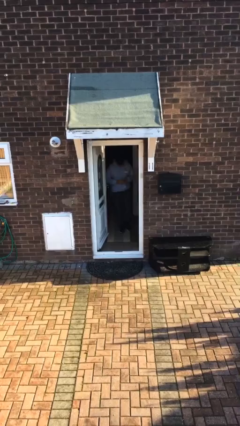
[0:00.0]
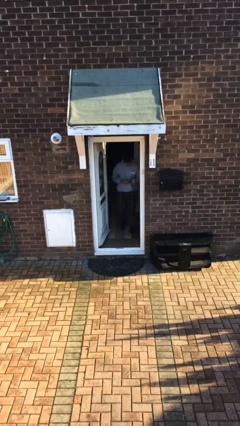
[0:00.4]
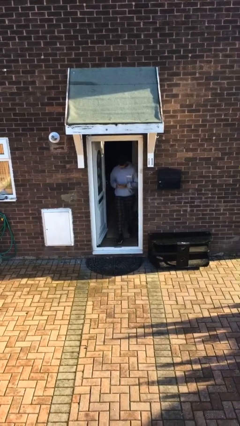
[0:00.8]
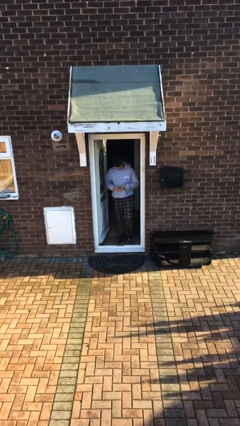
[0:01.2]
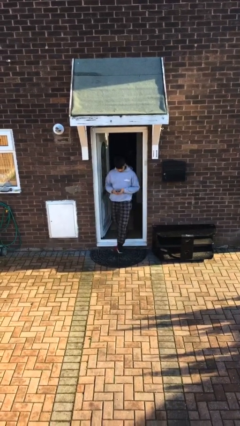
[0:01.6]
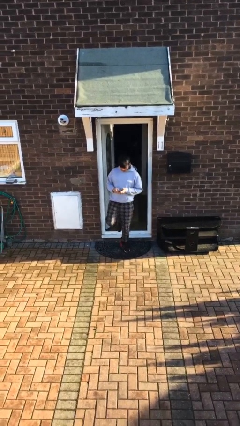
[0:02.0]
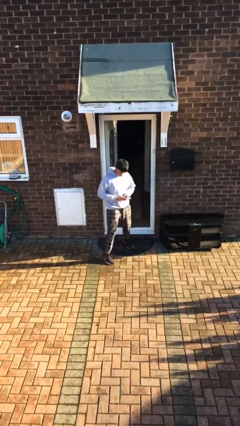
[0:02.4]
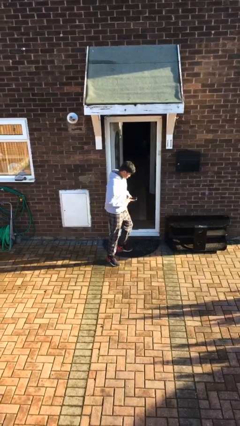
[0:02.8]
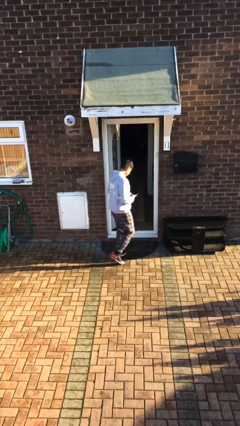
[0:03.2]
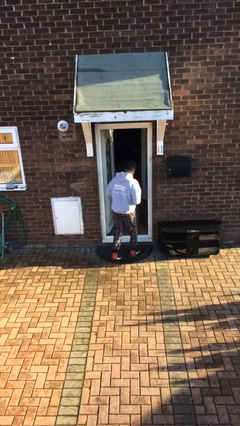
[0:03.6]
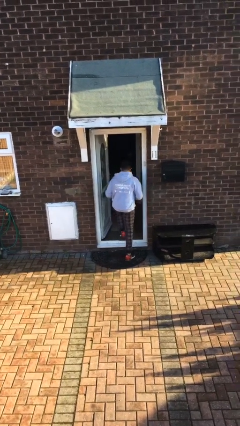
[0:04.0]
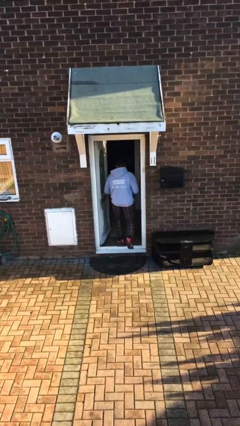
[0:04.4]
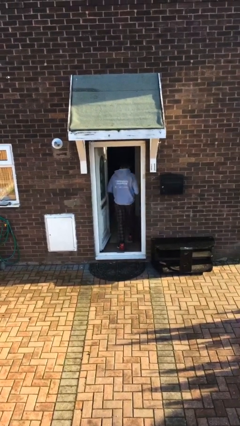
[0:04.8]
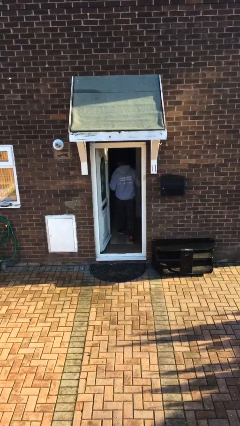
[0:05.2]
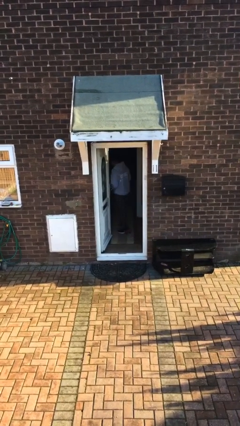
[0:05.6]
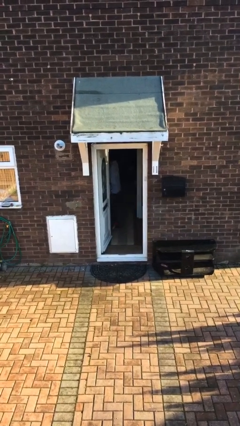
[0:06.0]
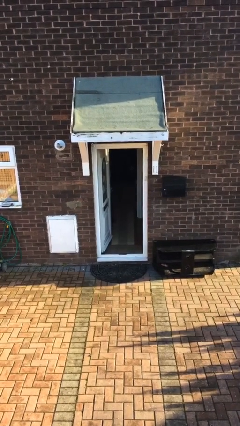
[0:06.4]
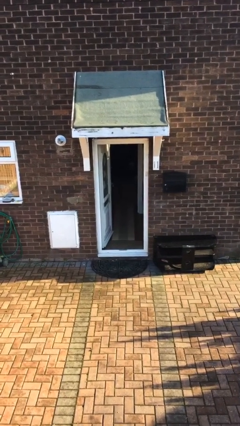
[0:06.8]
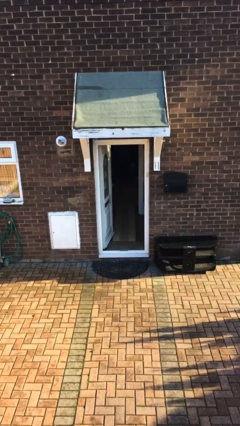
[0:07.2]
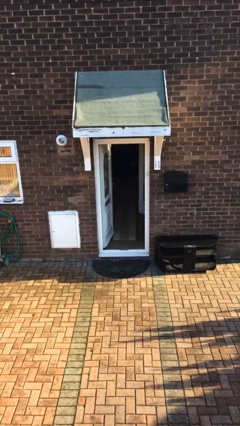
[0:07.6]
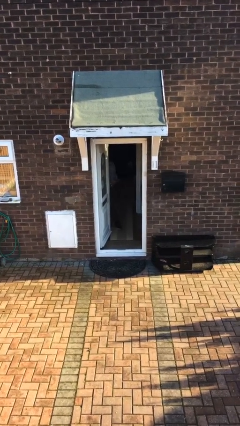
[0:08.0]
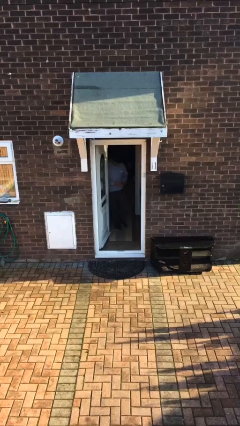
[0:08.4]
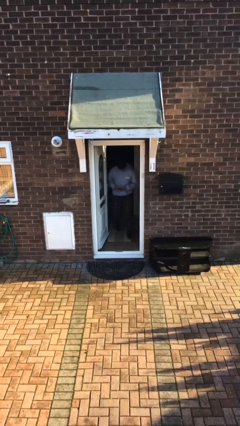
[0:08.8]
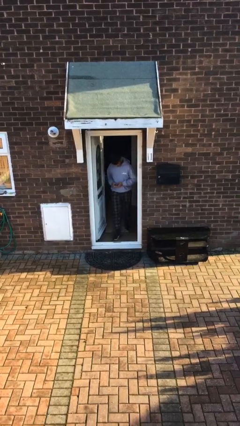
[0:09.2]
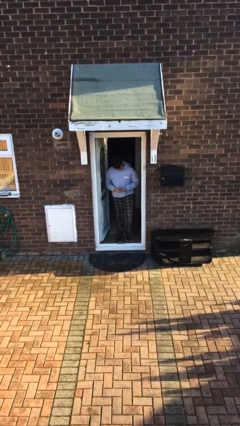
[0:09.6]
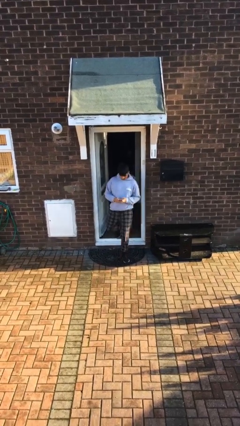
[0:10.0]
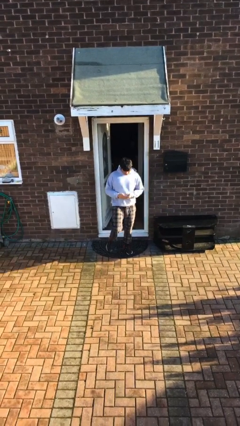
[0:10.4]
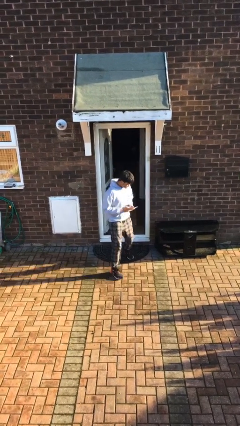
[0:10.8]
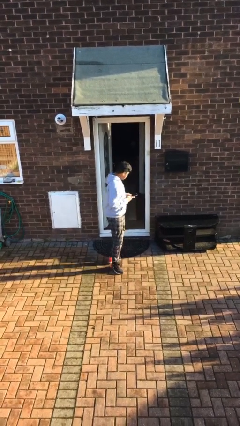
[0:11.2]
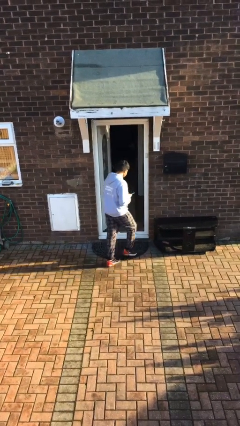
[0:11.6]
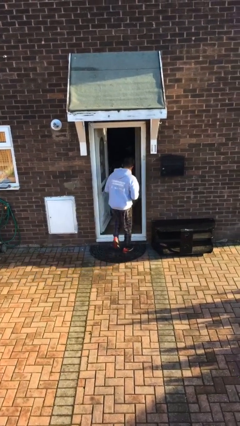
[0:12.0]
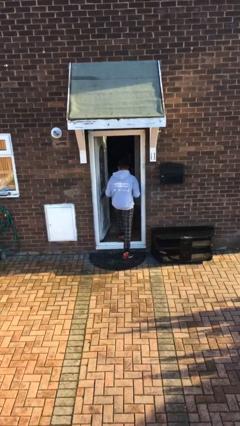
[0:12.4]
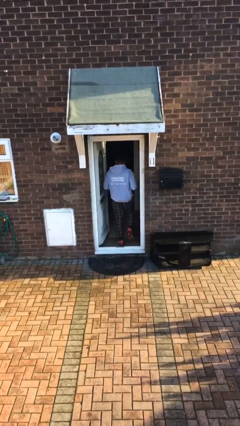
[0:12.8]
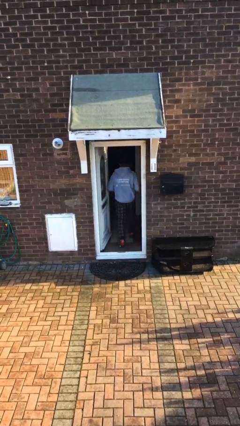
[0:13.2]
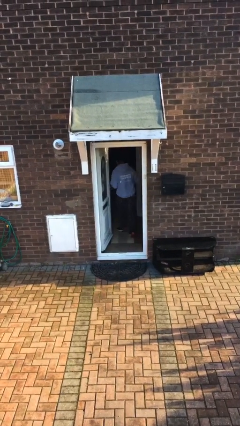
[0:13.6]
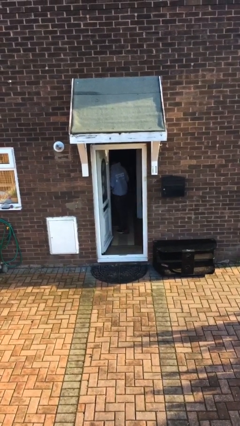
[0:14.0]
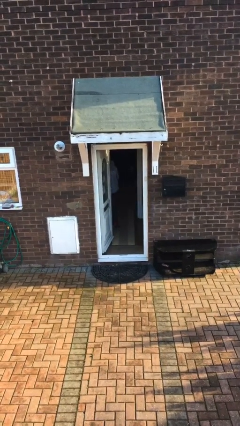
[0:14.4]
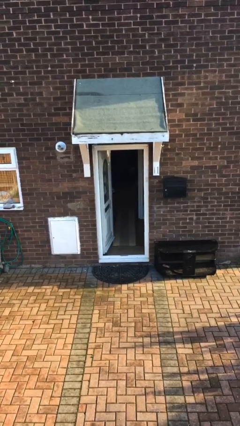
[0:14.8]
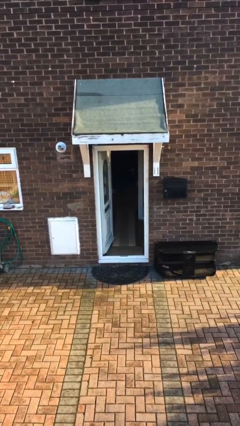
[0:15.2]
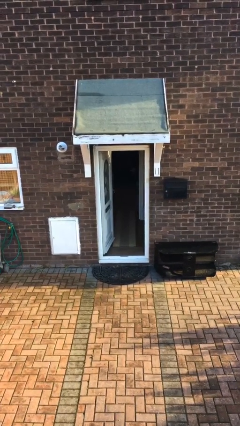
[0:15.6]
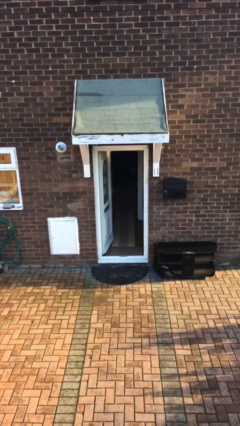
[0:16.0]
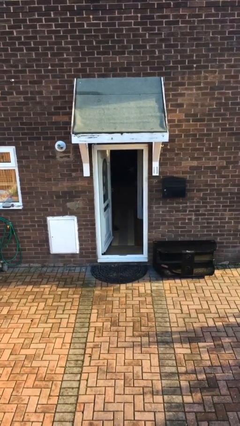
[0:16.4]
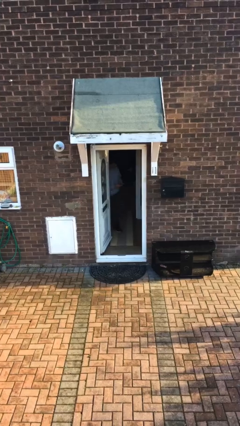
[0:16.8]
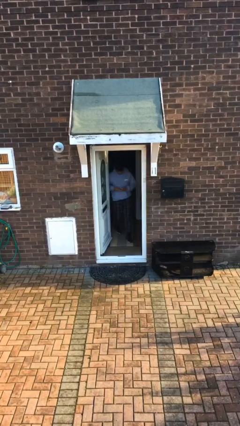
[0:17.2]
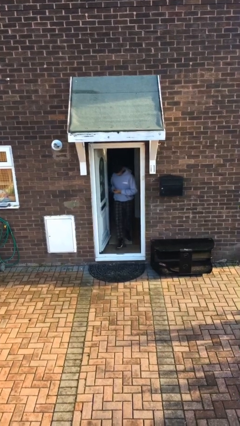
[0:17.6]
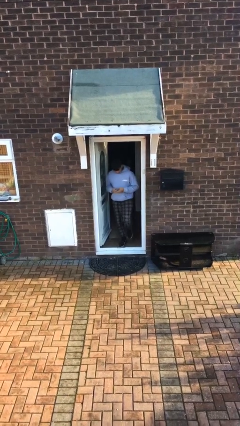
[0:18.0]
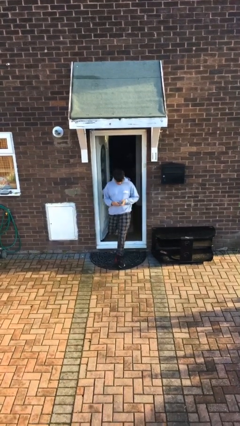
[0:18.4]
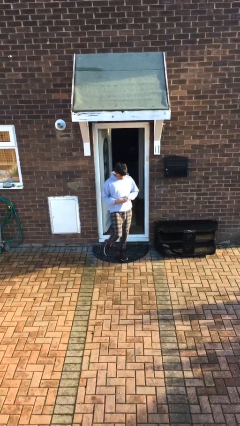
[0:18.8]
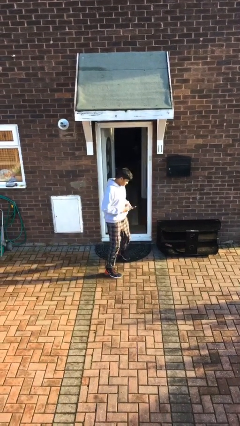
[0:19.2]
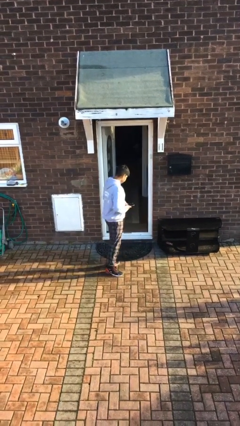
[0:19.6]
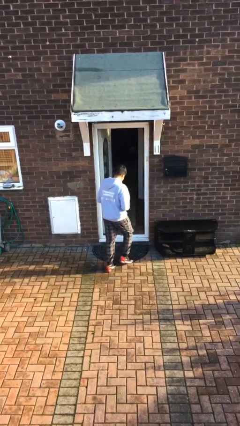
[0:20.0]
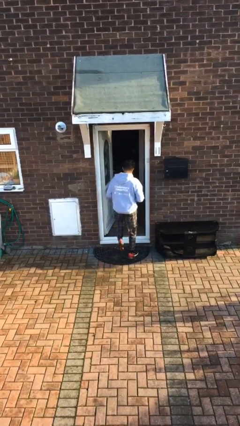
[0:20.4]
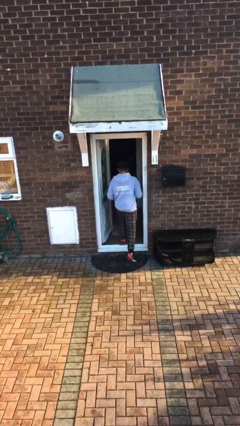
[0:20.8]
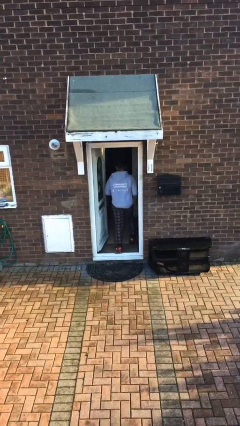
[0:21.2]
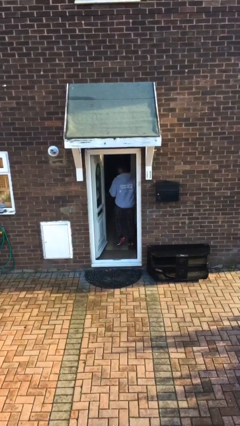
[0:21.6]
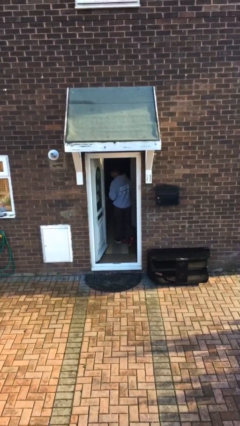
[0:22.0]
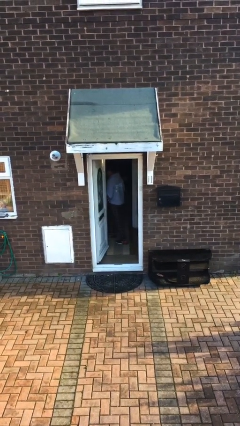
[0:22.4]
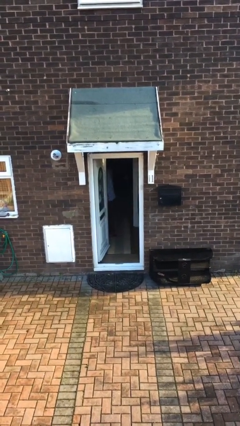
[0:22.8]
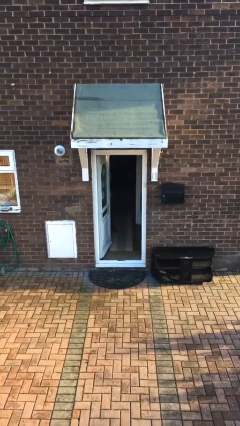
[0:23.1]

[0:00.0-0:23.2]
person texts on phone

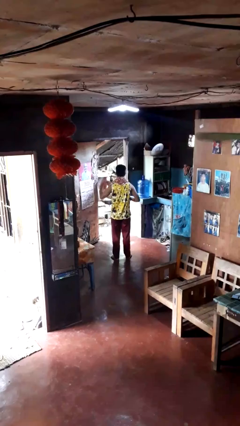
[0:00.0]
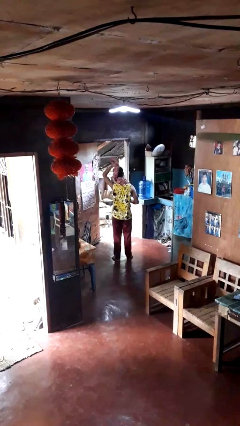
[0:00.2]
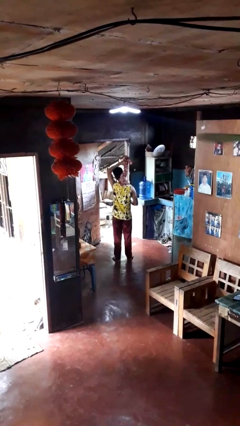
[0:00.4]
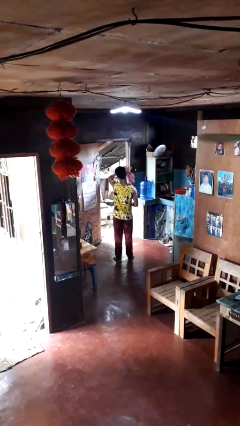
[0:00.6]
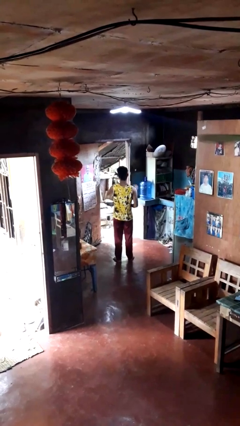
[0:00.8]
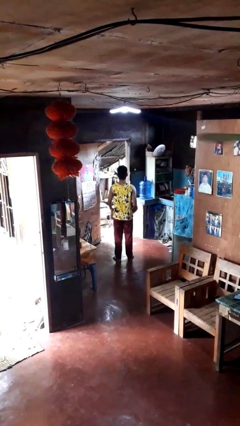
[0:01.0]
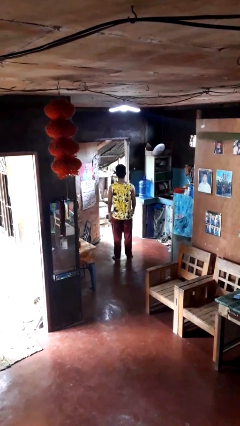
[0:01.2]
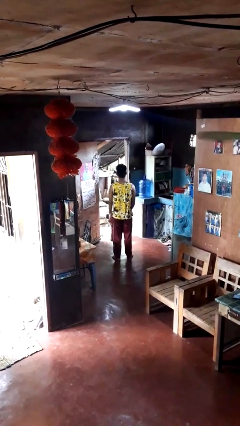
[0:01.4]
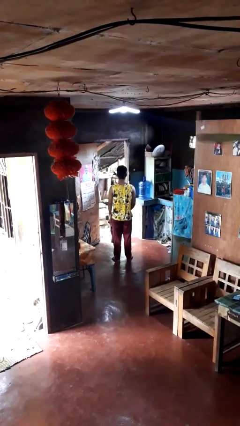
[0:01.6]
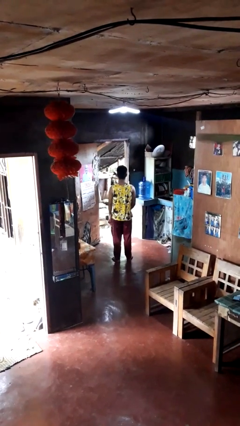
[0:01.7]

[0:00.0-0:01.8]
person takes off scarf

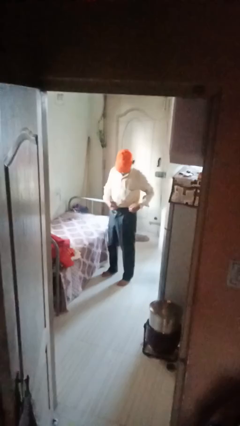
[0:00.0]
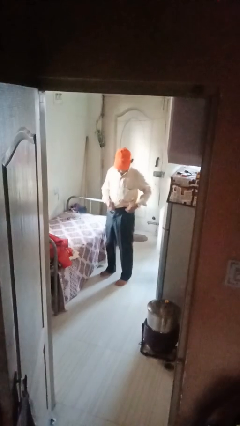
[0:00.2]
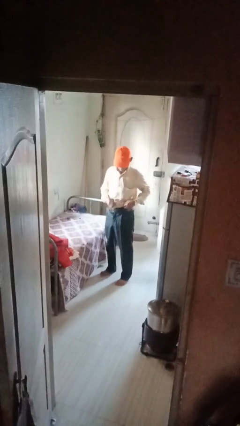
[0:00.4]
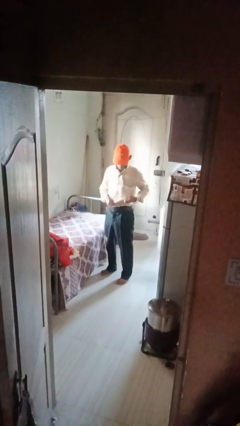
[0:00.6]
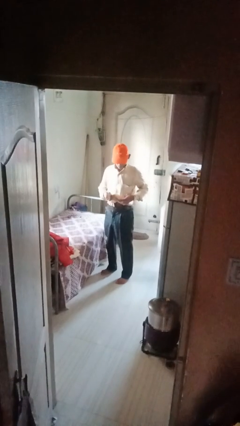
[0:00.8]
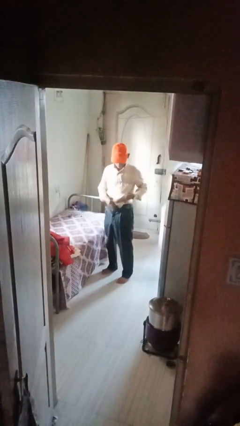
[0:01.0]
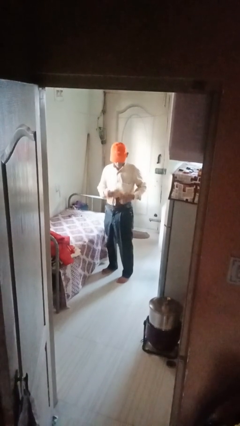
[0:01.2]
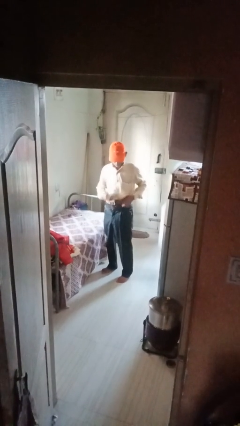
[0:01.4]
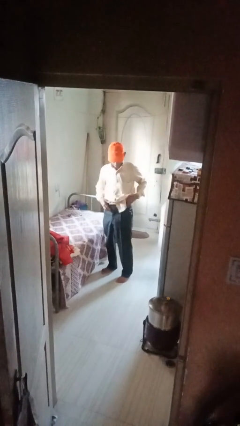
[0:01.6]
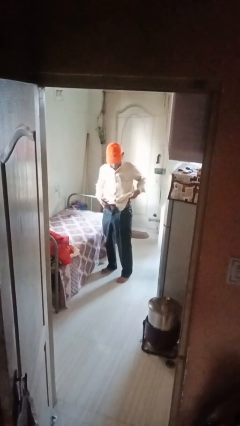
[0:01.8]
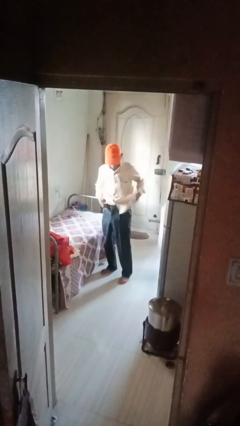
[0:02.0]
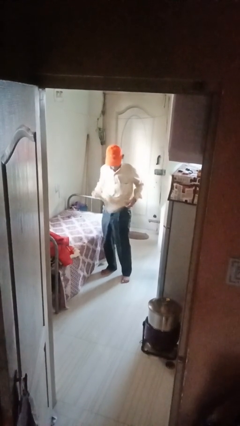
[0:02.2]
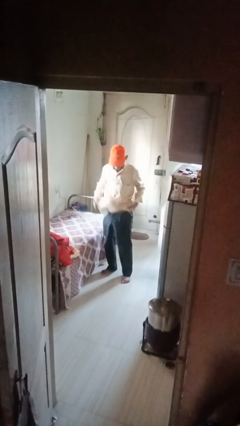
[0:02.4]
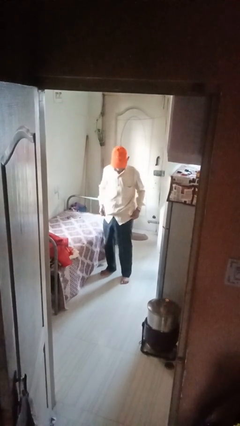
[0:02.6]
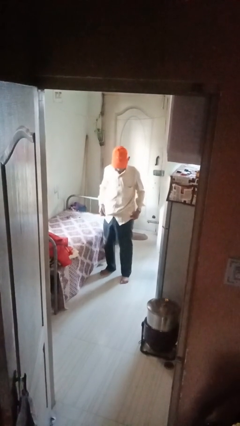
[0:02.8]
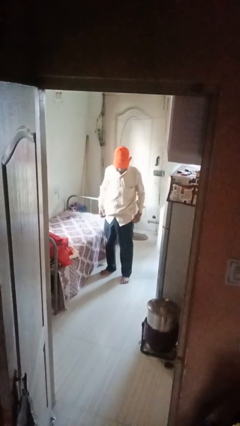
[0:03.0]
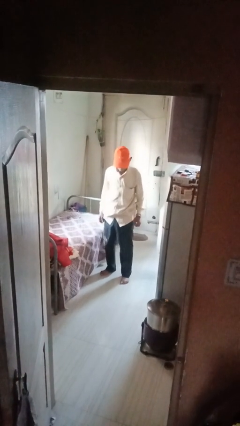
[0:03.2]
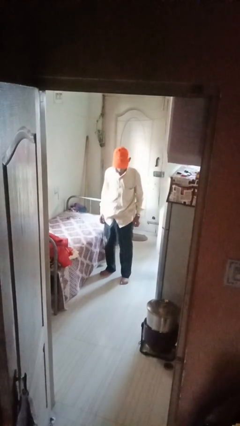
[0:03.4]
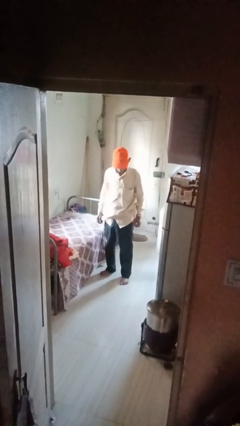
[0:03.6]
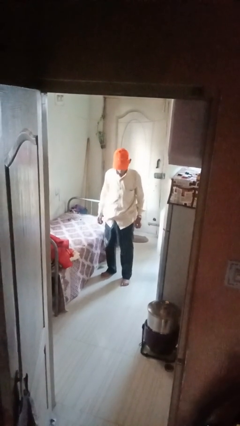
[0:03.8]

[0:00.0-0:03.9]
person untucks shirt

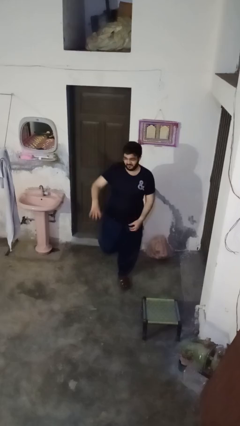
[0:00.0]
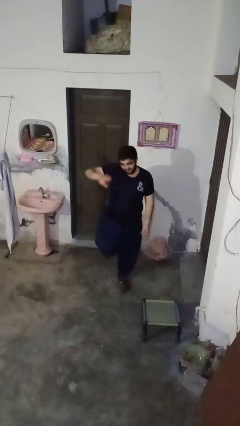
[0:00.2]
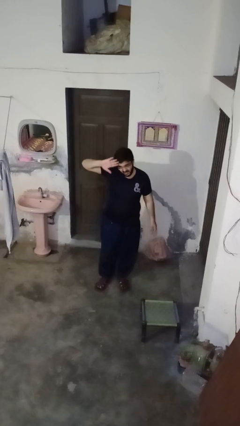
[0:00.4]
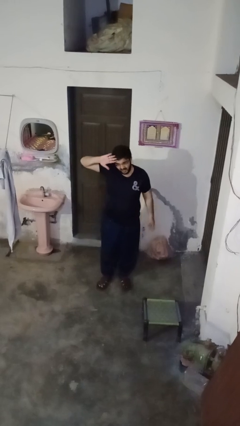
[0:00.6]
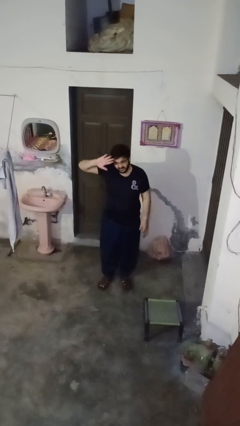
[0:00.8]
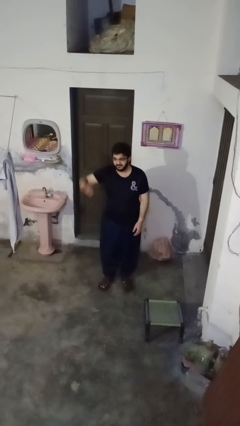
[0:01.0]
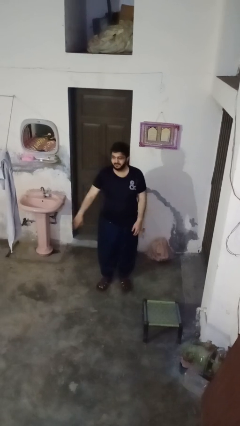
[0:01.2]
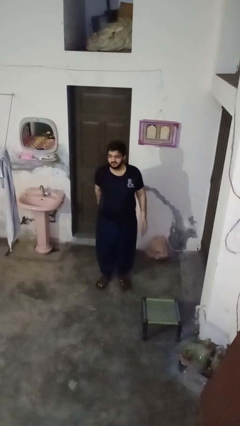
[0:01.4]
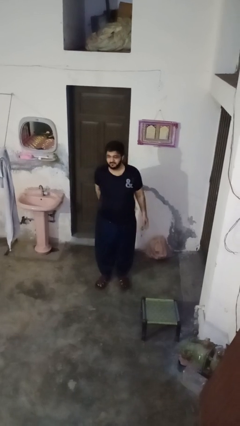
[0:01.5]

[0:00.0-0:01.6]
person salutes
